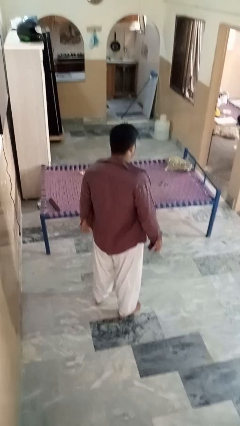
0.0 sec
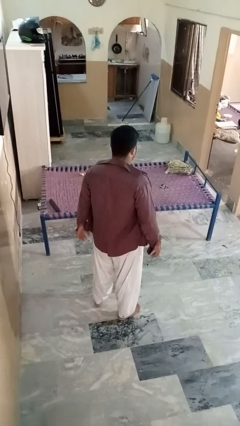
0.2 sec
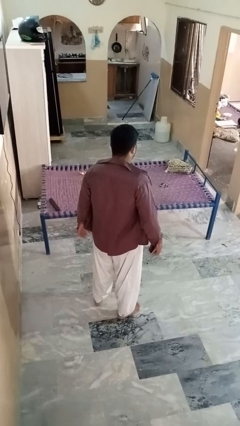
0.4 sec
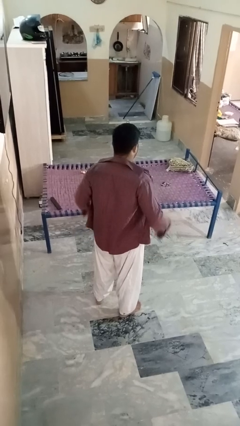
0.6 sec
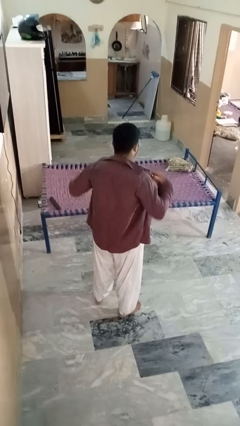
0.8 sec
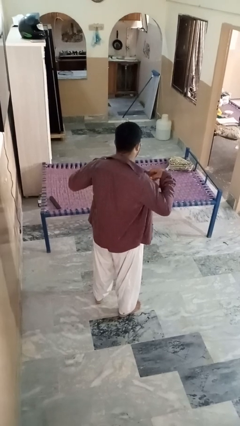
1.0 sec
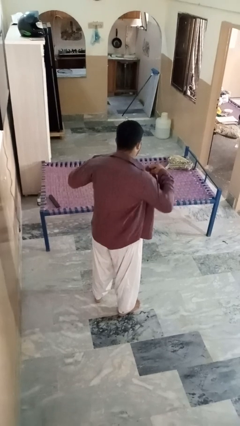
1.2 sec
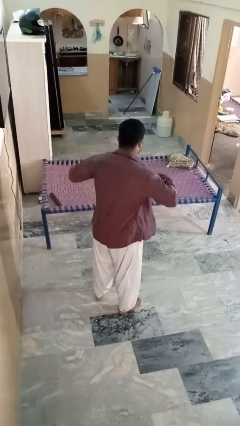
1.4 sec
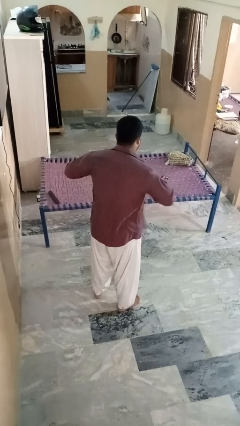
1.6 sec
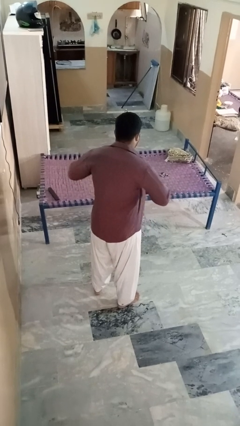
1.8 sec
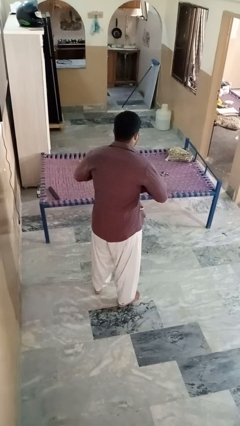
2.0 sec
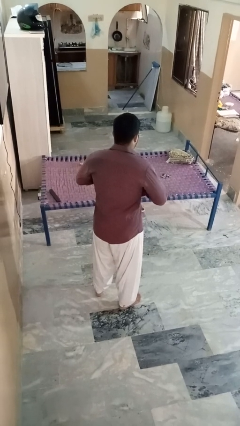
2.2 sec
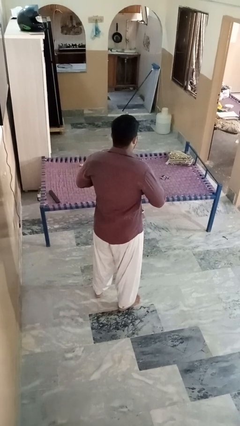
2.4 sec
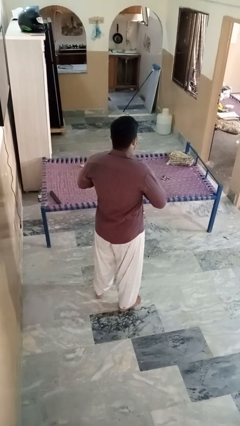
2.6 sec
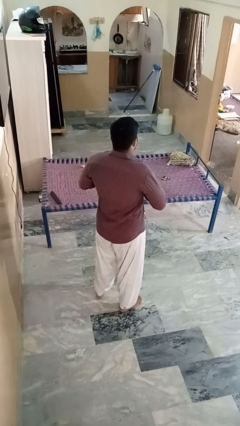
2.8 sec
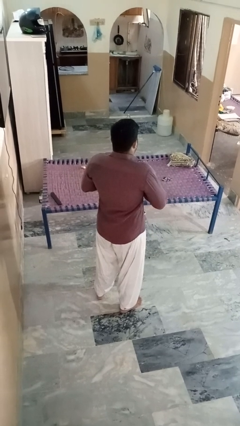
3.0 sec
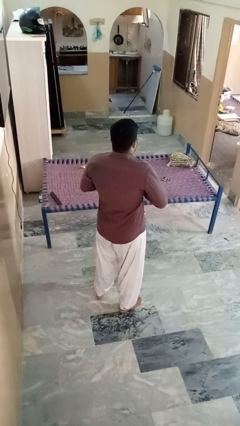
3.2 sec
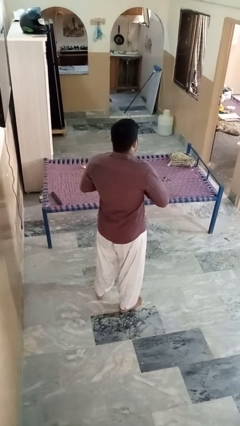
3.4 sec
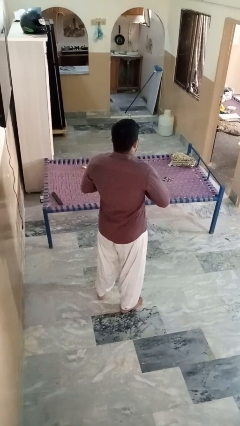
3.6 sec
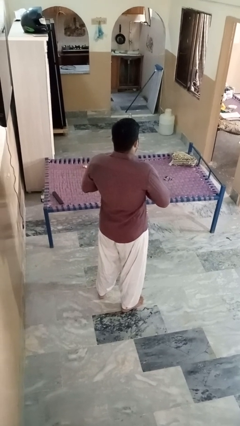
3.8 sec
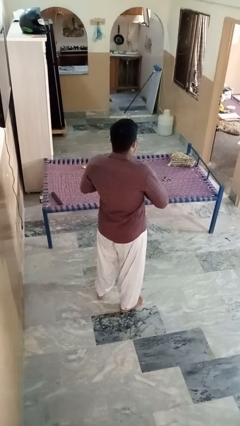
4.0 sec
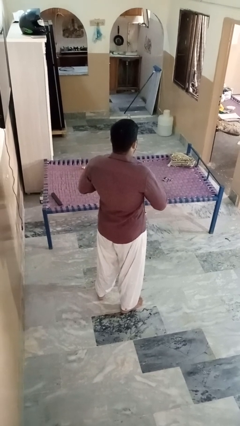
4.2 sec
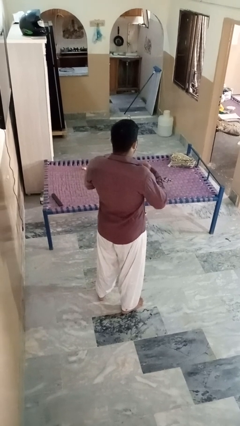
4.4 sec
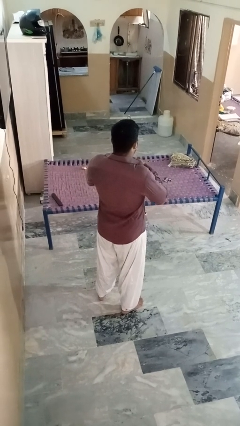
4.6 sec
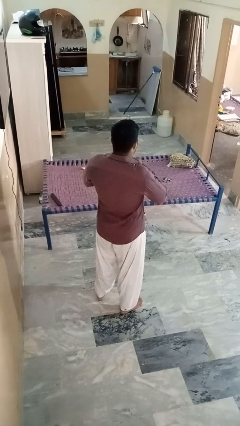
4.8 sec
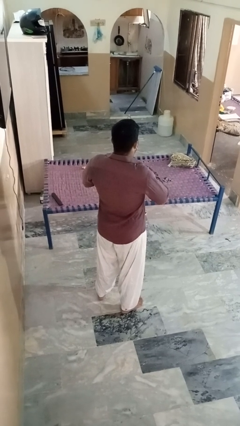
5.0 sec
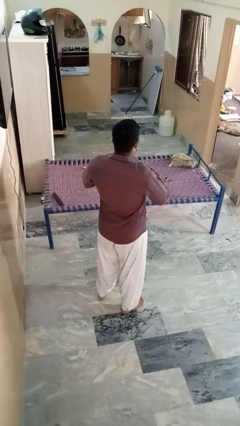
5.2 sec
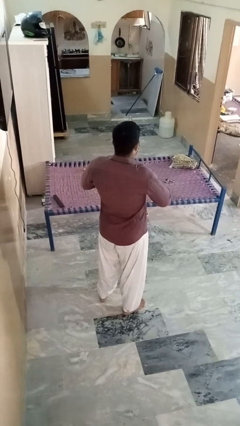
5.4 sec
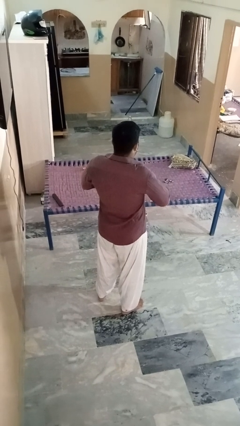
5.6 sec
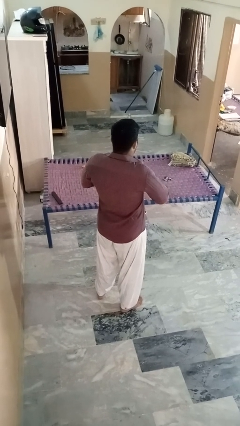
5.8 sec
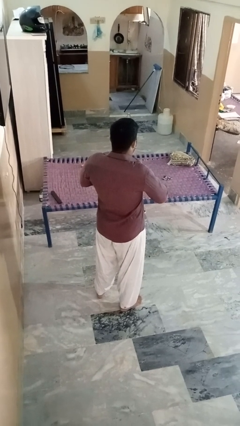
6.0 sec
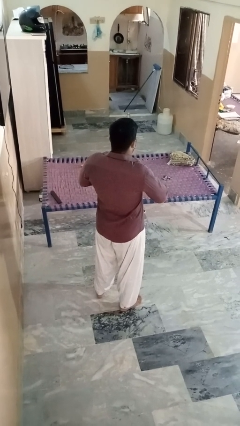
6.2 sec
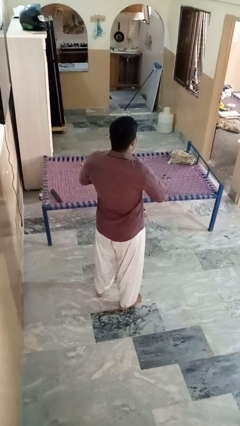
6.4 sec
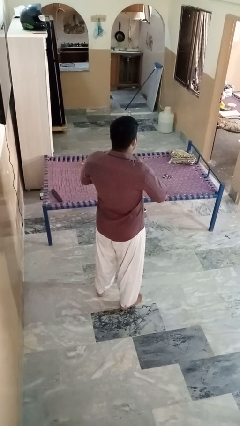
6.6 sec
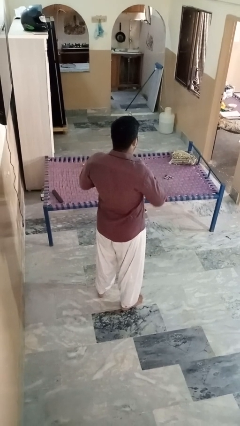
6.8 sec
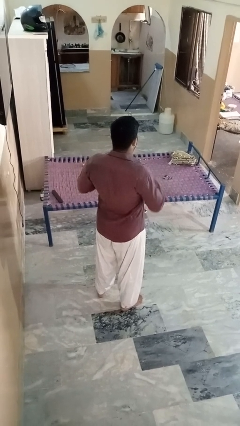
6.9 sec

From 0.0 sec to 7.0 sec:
person buttons shirt

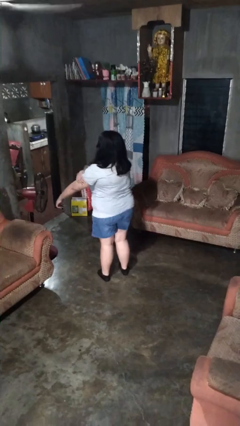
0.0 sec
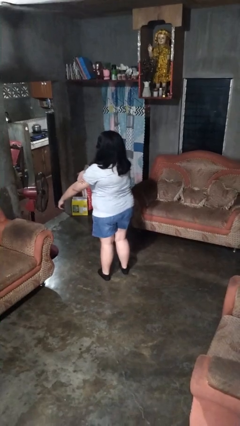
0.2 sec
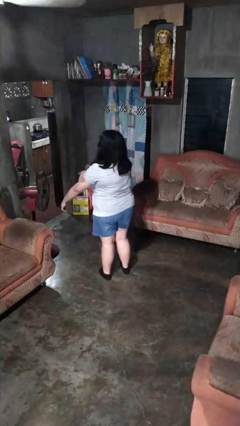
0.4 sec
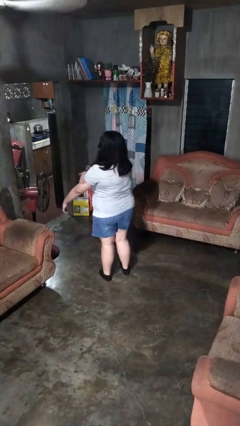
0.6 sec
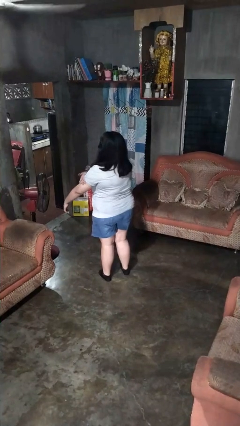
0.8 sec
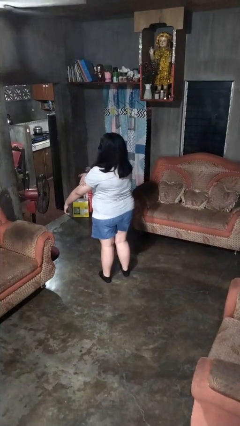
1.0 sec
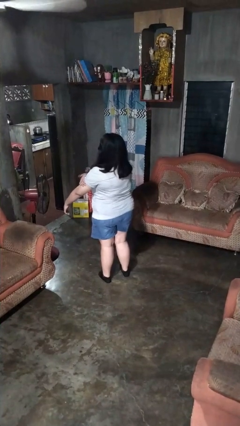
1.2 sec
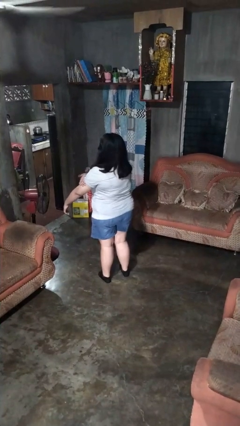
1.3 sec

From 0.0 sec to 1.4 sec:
person swats bug

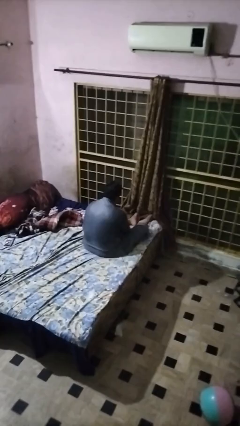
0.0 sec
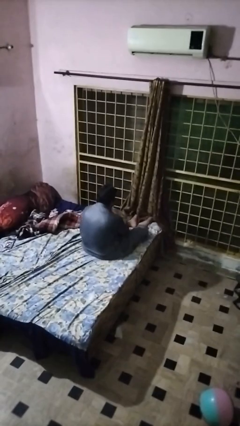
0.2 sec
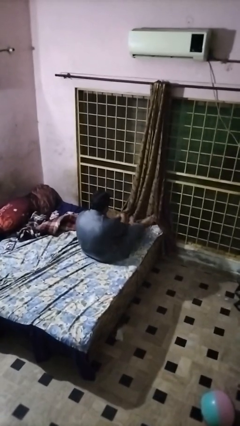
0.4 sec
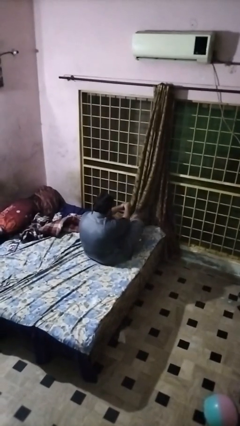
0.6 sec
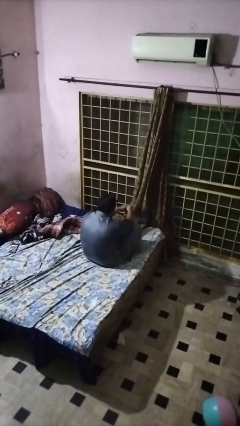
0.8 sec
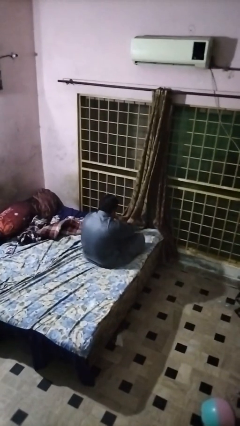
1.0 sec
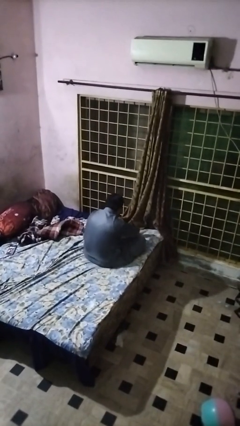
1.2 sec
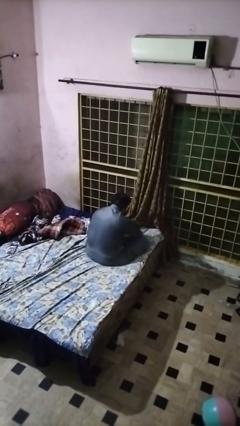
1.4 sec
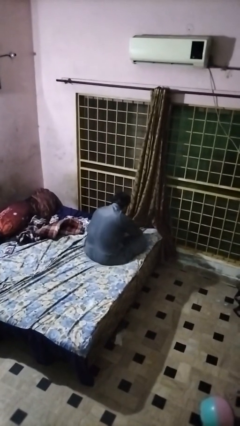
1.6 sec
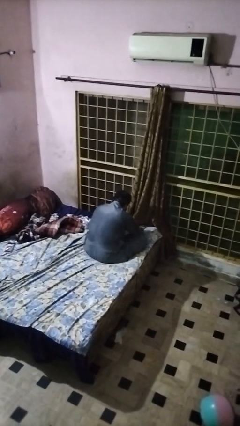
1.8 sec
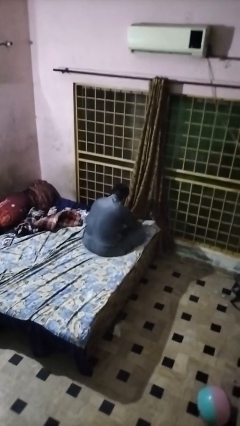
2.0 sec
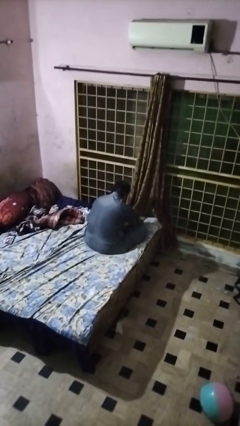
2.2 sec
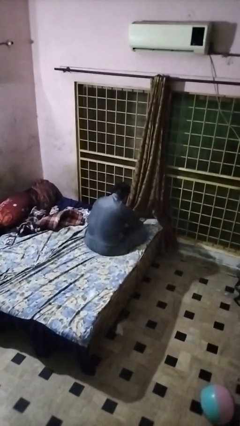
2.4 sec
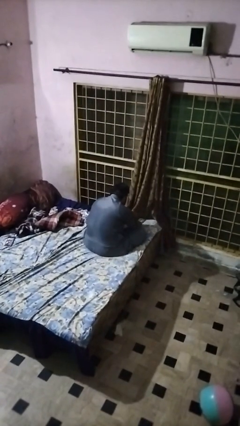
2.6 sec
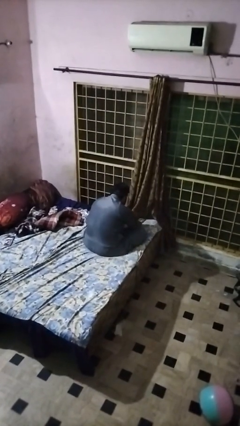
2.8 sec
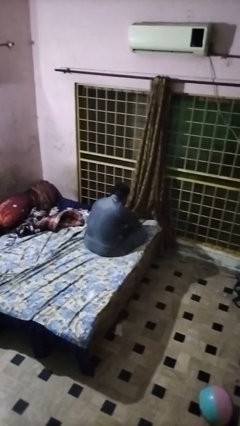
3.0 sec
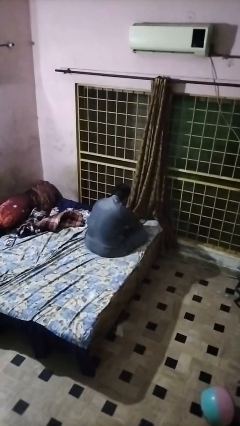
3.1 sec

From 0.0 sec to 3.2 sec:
person crosses legs

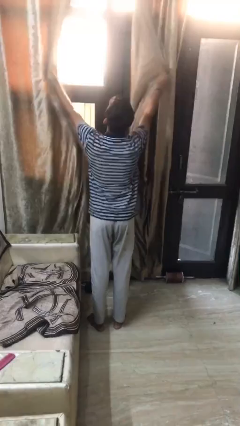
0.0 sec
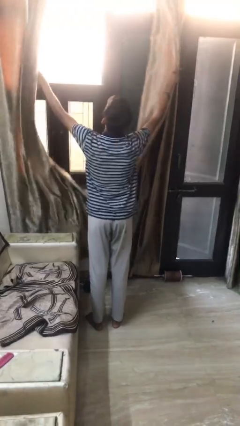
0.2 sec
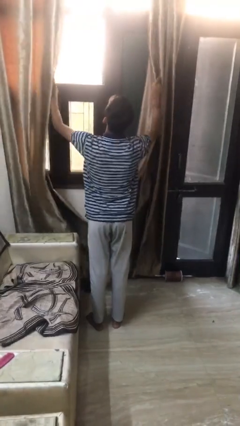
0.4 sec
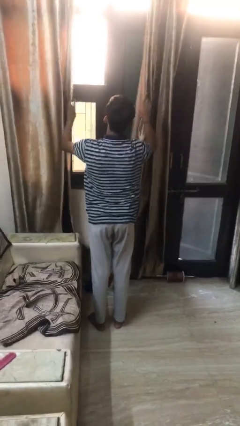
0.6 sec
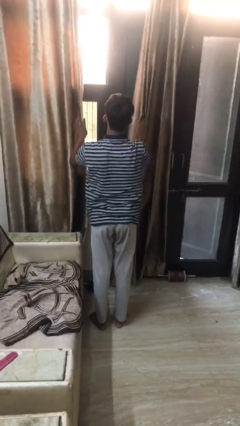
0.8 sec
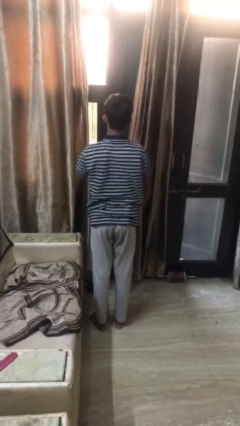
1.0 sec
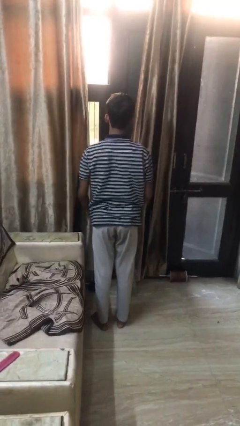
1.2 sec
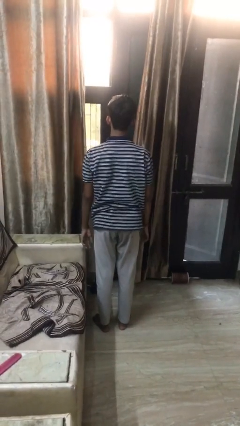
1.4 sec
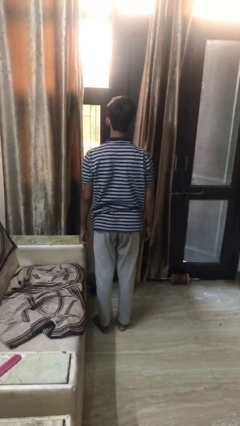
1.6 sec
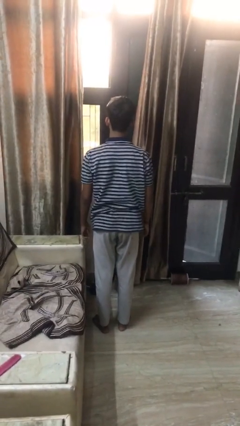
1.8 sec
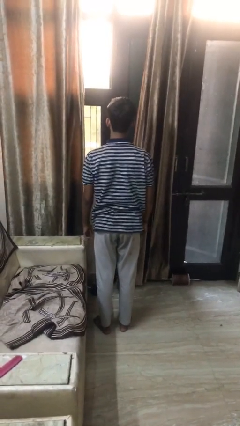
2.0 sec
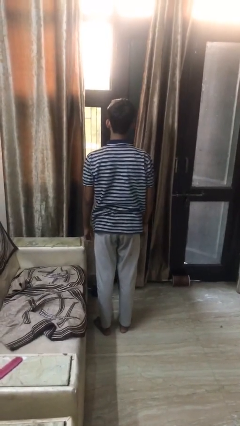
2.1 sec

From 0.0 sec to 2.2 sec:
person opens curtains

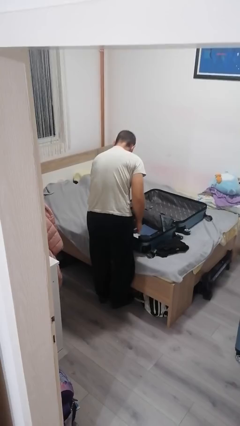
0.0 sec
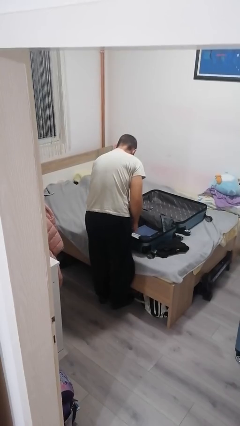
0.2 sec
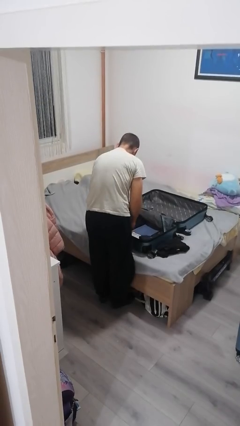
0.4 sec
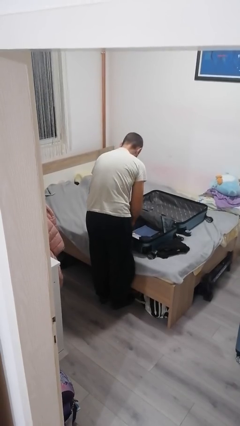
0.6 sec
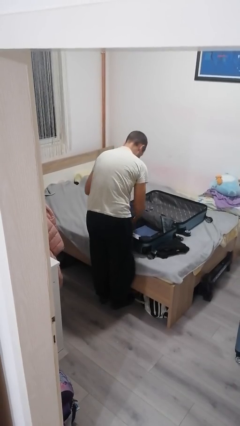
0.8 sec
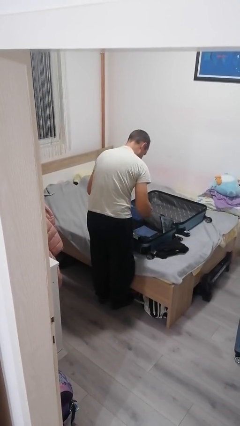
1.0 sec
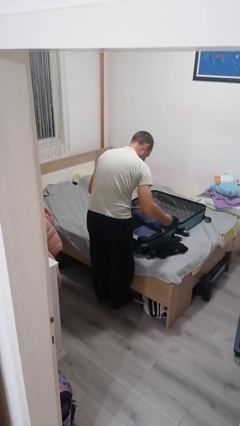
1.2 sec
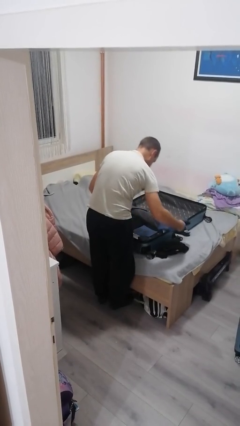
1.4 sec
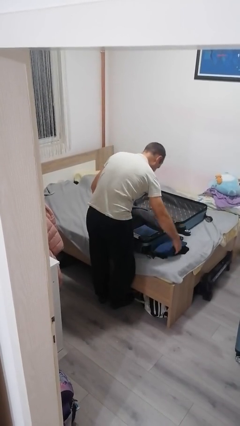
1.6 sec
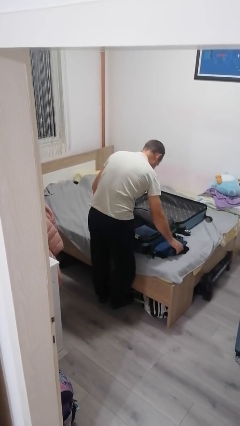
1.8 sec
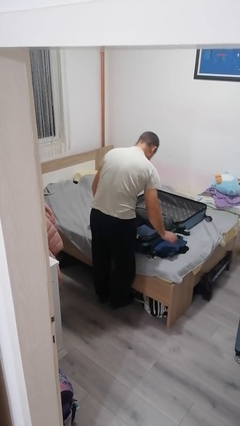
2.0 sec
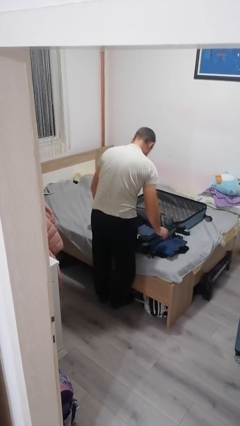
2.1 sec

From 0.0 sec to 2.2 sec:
person unloads clothes from suitcase

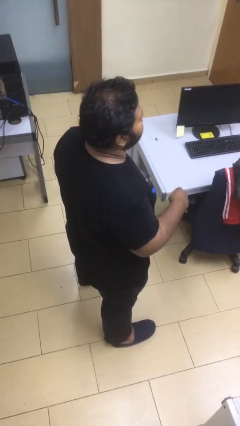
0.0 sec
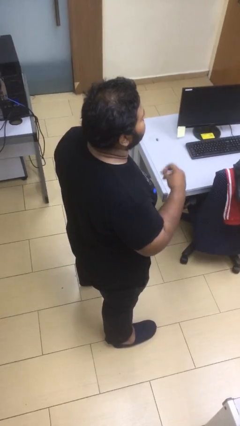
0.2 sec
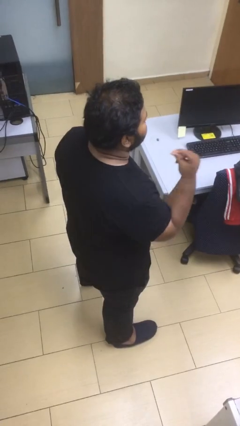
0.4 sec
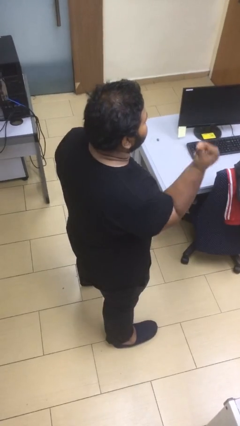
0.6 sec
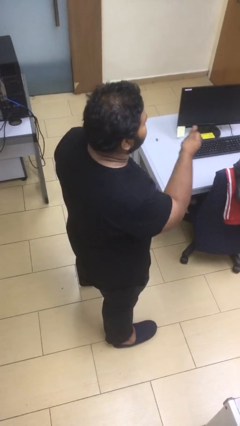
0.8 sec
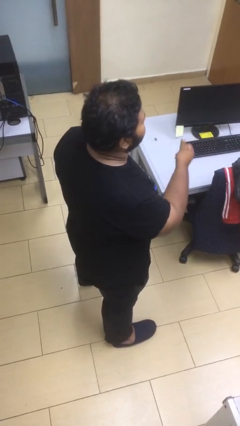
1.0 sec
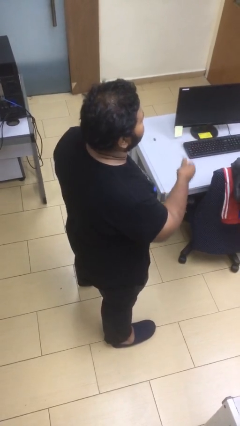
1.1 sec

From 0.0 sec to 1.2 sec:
person snaps fingers
